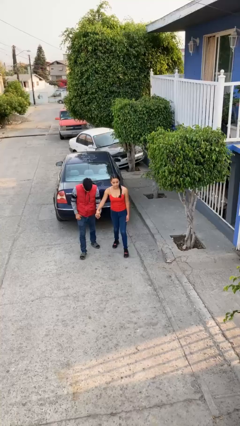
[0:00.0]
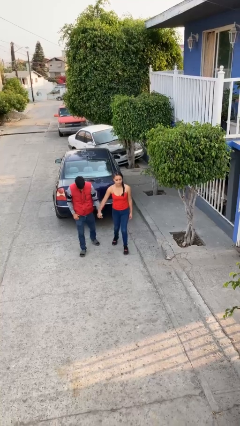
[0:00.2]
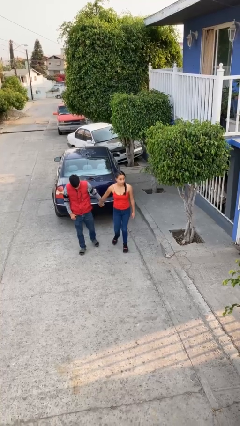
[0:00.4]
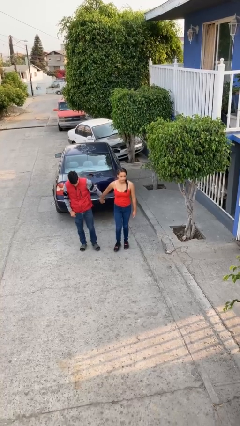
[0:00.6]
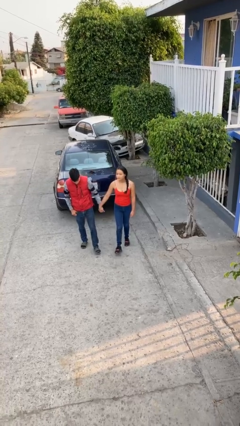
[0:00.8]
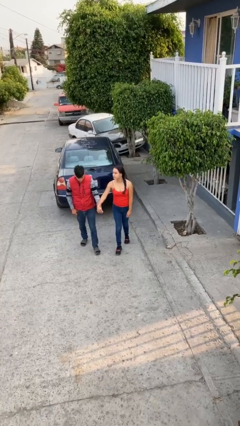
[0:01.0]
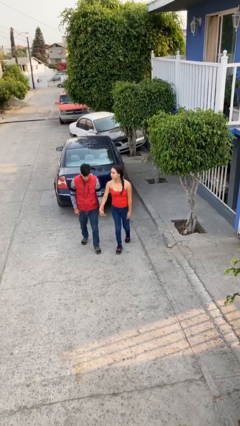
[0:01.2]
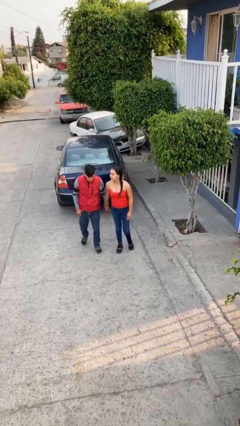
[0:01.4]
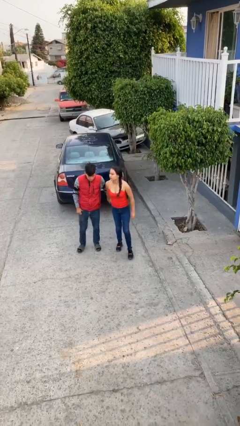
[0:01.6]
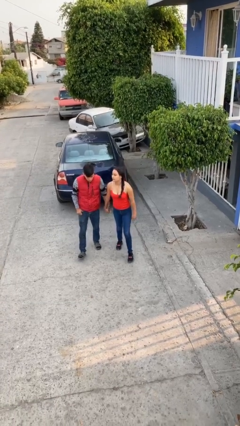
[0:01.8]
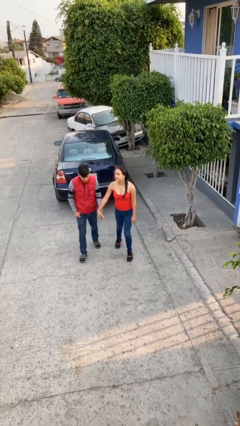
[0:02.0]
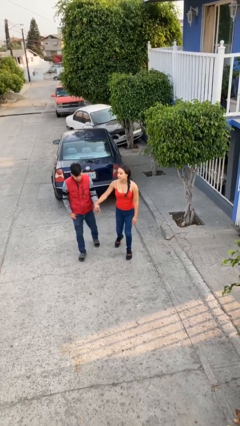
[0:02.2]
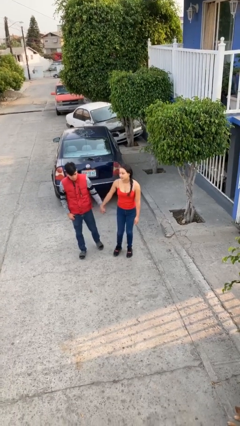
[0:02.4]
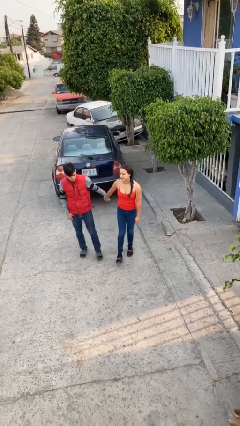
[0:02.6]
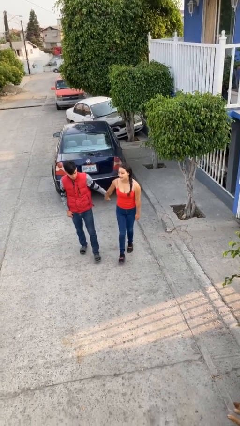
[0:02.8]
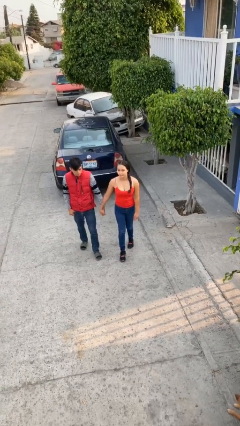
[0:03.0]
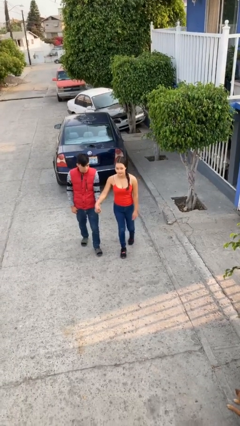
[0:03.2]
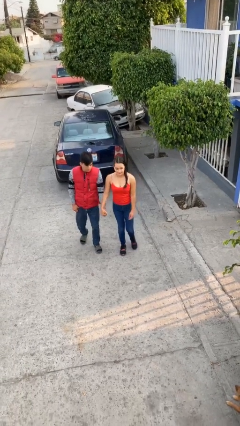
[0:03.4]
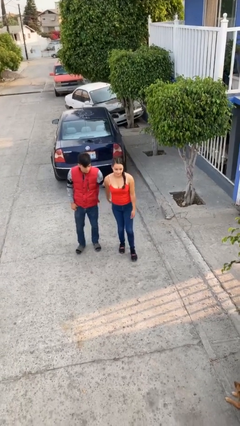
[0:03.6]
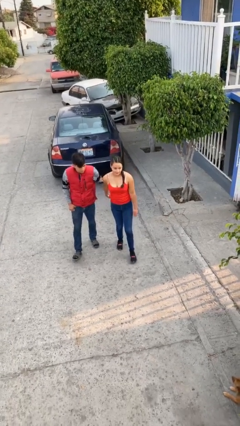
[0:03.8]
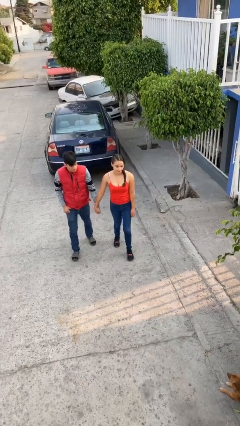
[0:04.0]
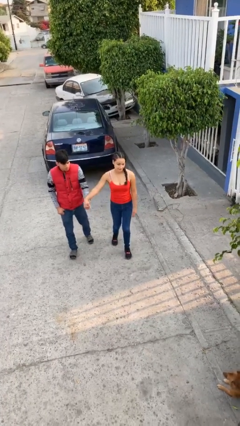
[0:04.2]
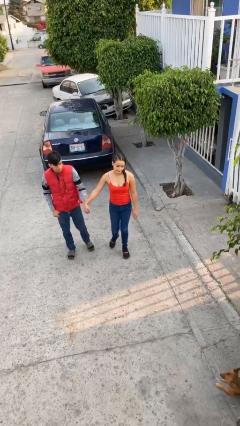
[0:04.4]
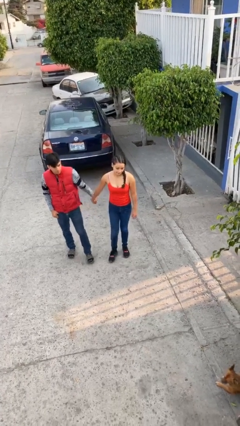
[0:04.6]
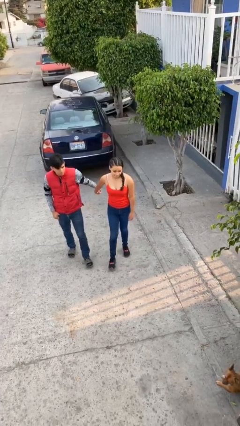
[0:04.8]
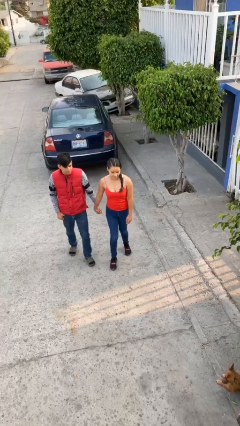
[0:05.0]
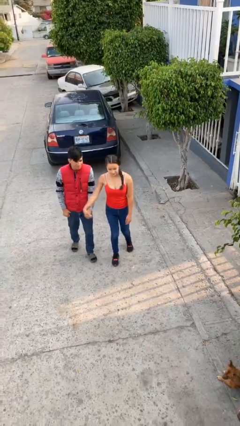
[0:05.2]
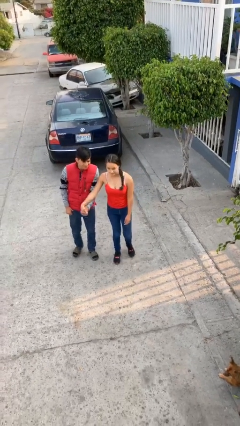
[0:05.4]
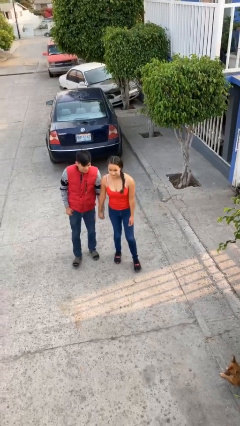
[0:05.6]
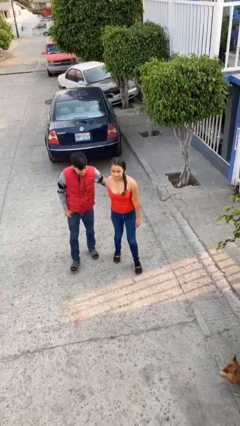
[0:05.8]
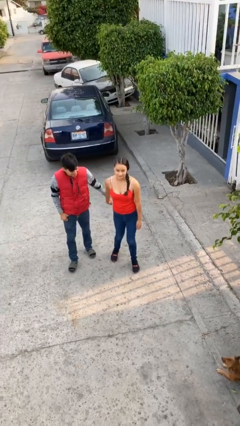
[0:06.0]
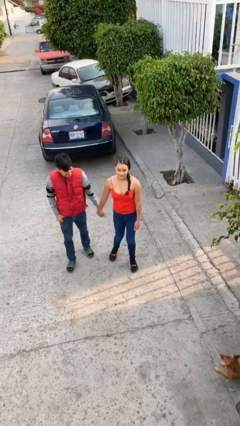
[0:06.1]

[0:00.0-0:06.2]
person holds hand

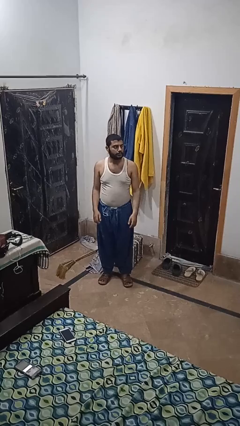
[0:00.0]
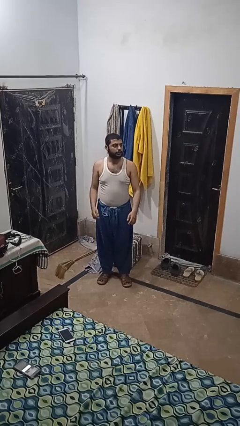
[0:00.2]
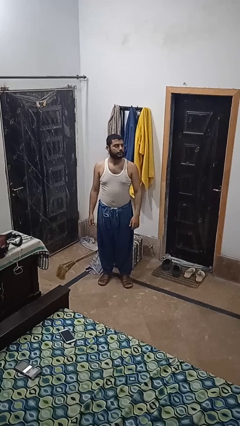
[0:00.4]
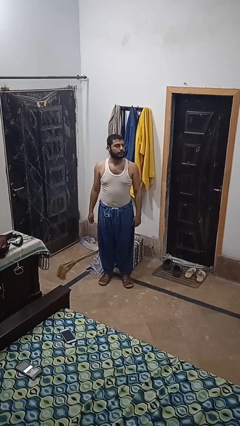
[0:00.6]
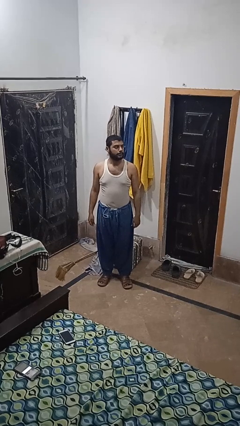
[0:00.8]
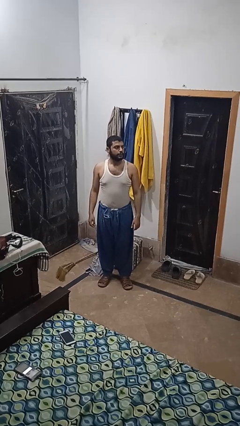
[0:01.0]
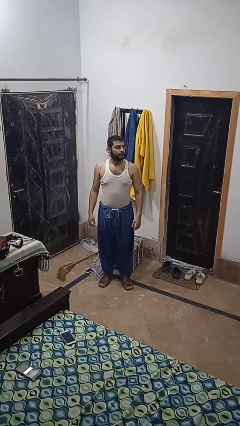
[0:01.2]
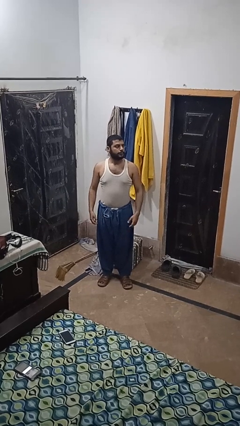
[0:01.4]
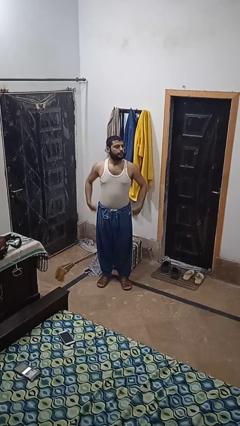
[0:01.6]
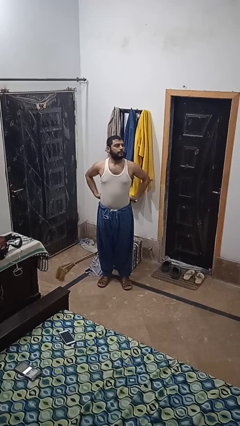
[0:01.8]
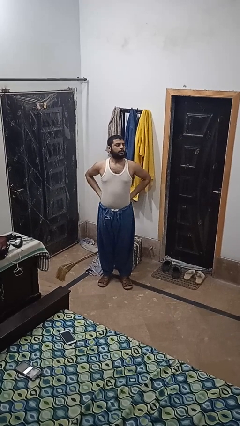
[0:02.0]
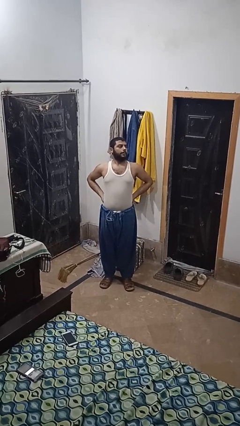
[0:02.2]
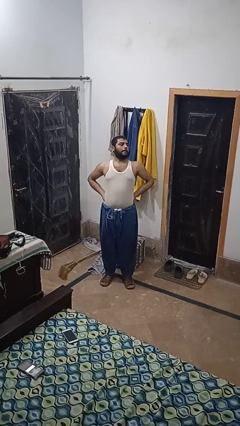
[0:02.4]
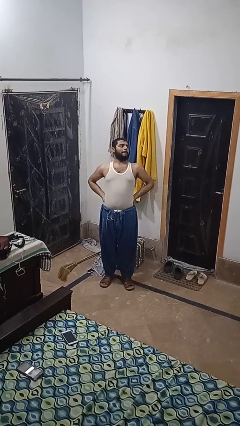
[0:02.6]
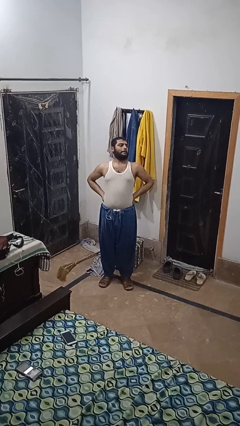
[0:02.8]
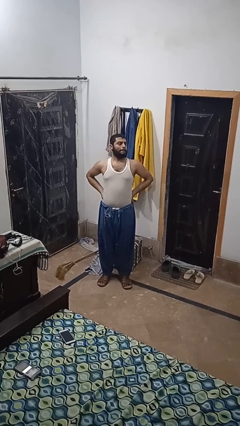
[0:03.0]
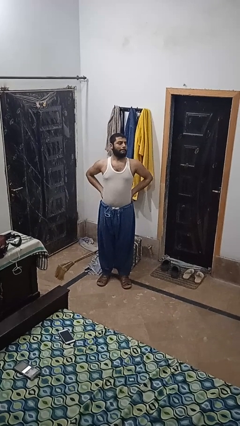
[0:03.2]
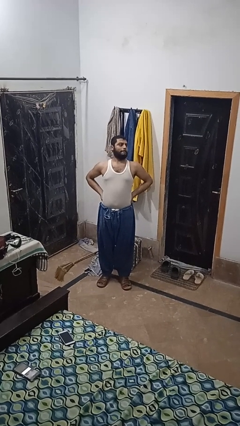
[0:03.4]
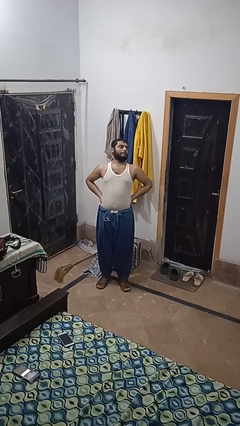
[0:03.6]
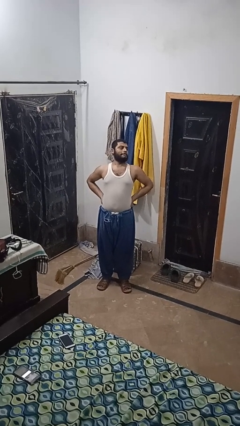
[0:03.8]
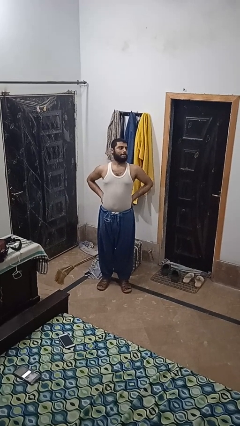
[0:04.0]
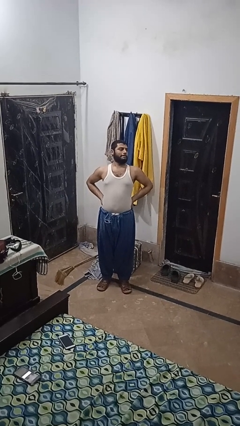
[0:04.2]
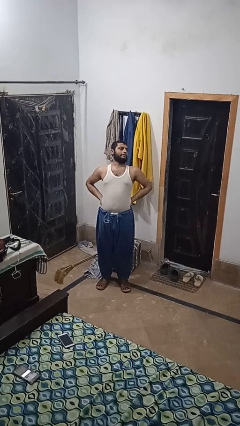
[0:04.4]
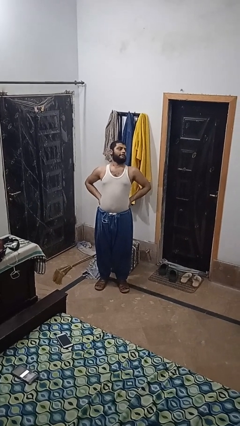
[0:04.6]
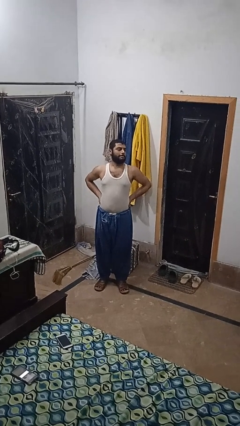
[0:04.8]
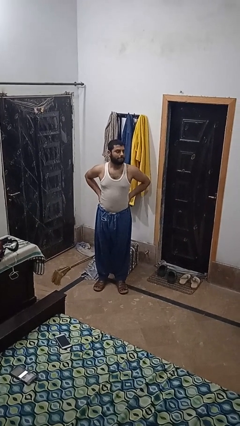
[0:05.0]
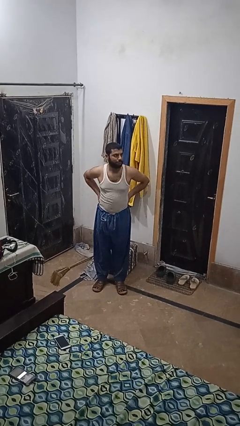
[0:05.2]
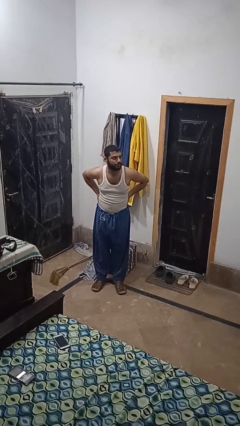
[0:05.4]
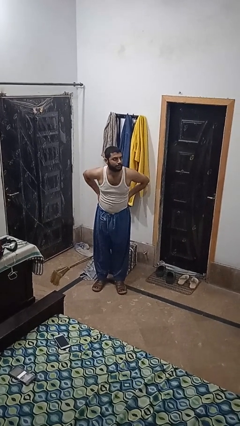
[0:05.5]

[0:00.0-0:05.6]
person stretches back

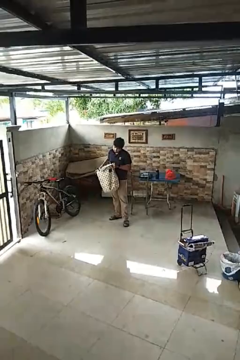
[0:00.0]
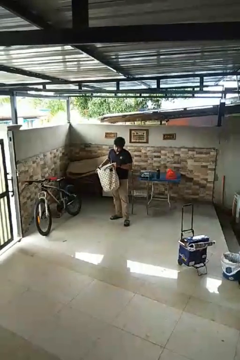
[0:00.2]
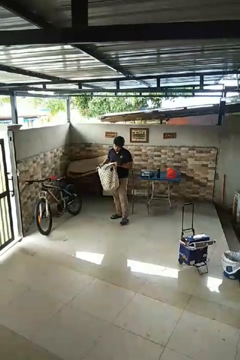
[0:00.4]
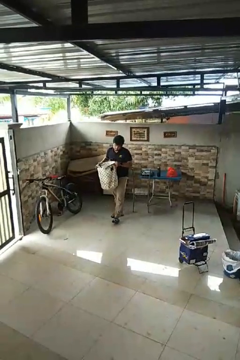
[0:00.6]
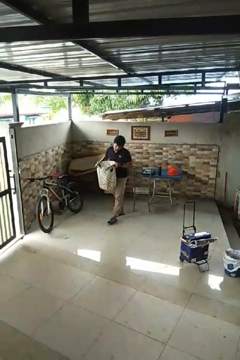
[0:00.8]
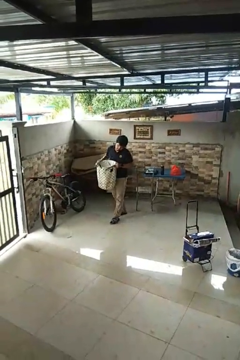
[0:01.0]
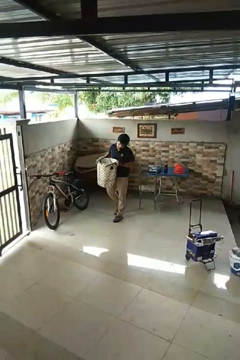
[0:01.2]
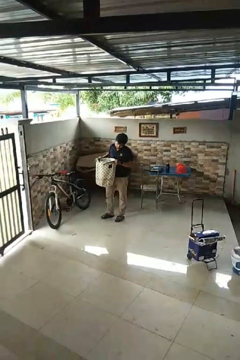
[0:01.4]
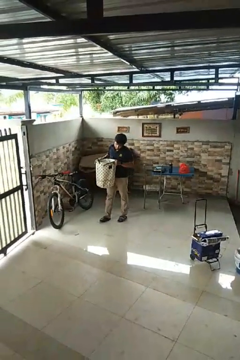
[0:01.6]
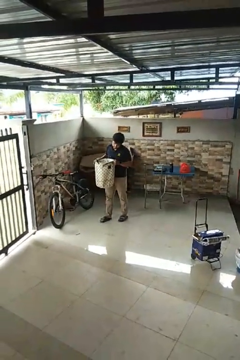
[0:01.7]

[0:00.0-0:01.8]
person carries laundry basket

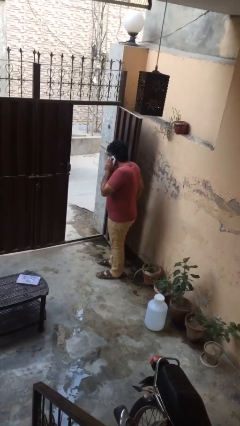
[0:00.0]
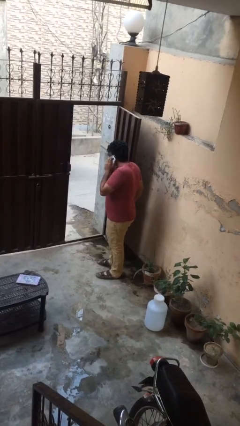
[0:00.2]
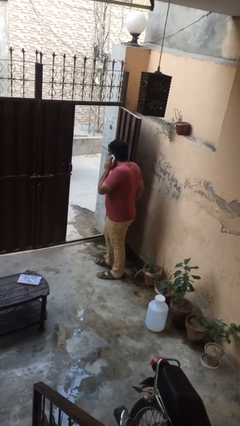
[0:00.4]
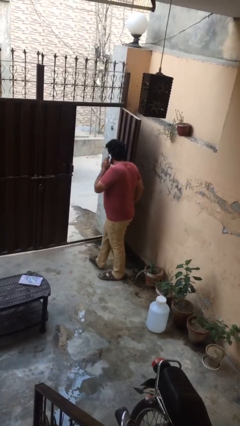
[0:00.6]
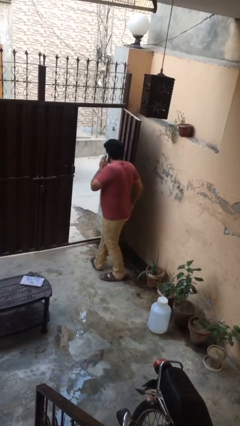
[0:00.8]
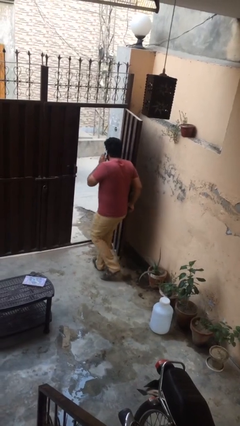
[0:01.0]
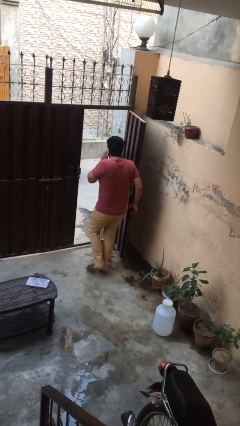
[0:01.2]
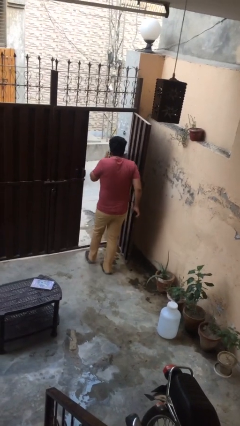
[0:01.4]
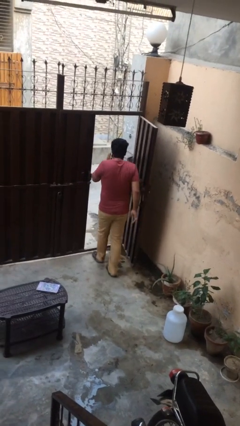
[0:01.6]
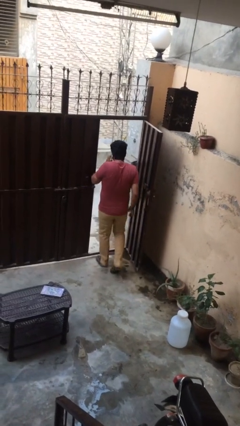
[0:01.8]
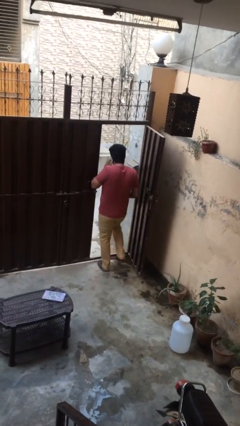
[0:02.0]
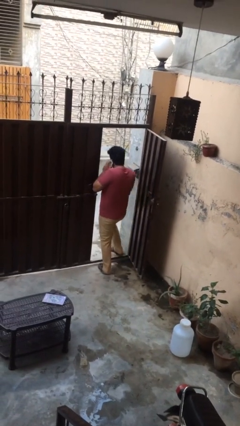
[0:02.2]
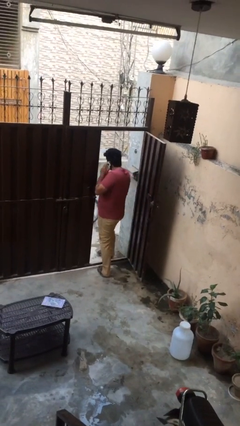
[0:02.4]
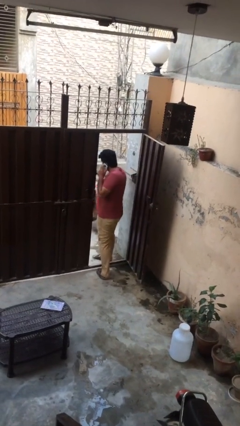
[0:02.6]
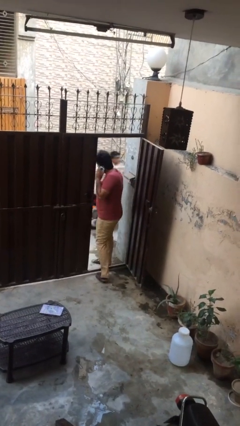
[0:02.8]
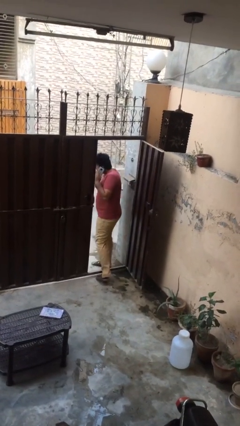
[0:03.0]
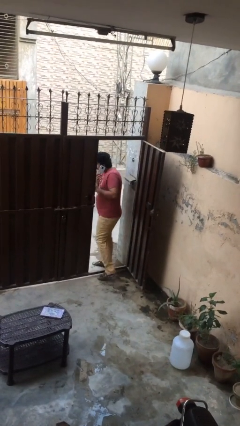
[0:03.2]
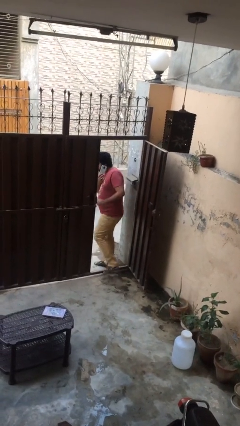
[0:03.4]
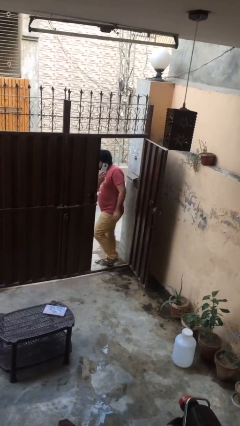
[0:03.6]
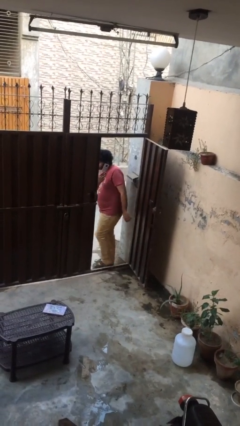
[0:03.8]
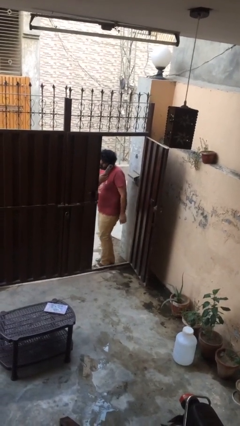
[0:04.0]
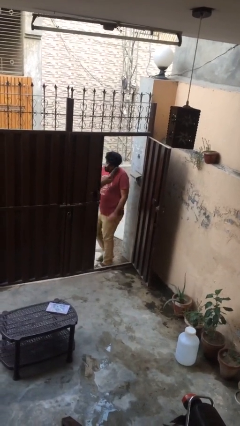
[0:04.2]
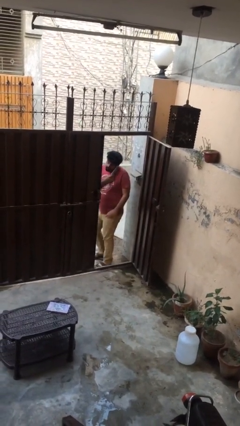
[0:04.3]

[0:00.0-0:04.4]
person exits scene through structure
